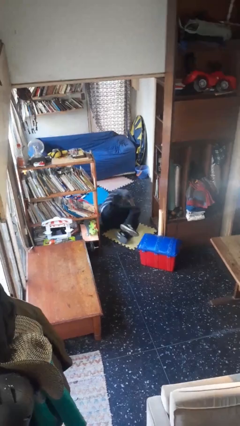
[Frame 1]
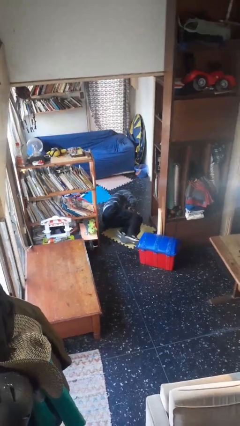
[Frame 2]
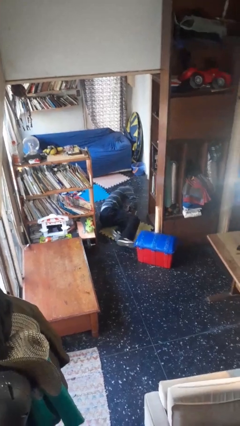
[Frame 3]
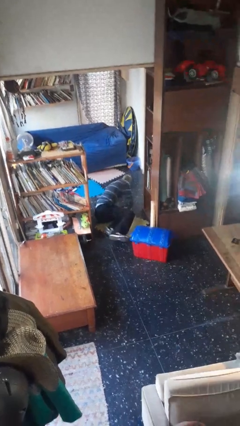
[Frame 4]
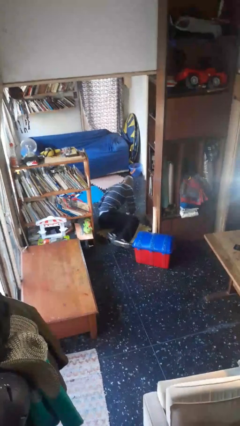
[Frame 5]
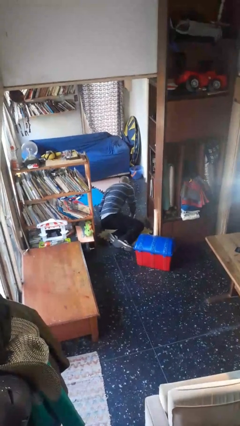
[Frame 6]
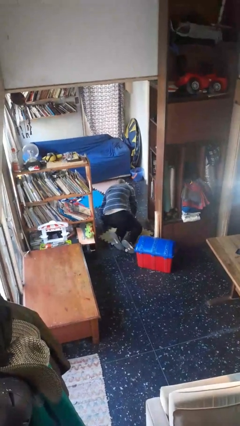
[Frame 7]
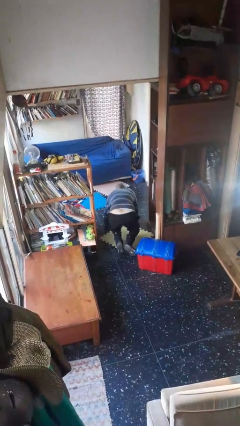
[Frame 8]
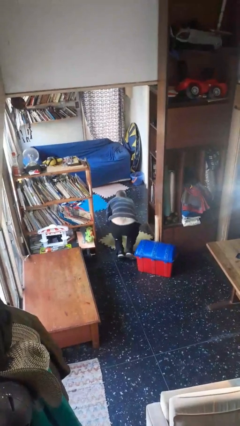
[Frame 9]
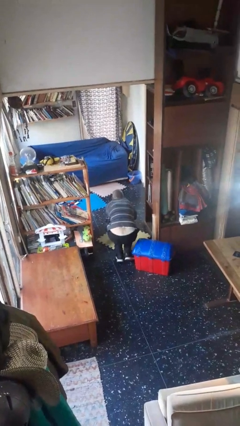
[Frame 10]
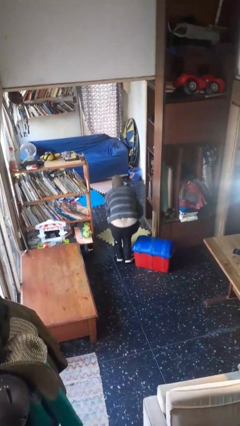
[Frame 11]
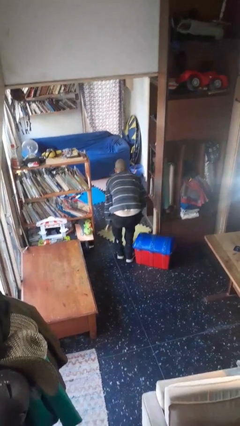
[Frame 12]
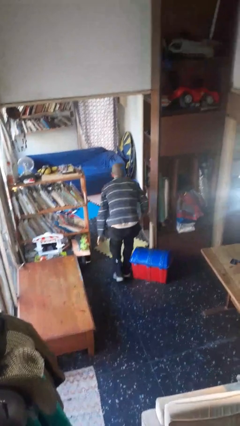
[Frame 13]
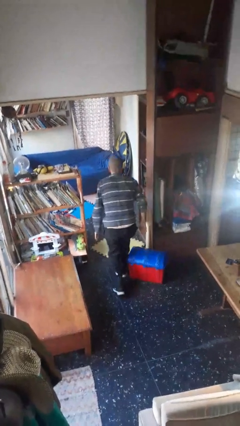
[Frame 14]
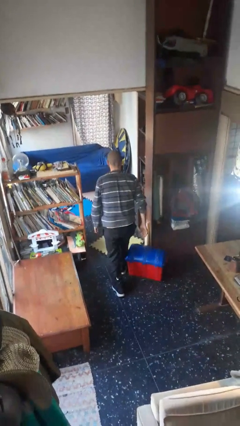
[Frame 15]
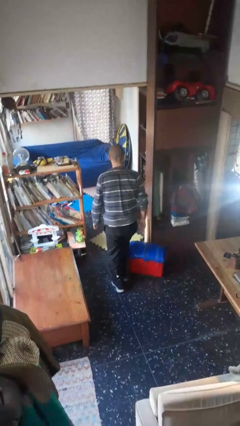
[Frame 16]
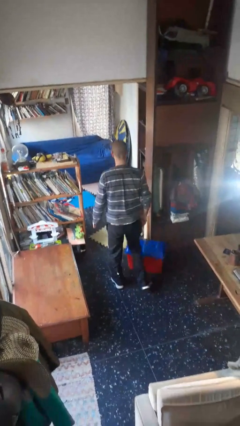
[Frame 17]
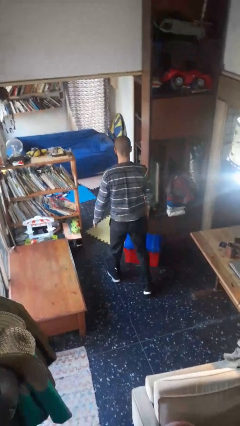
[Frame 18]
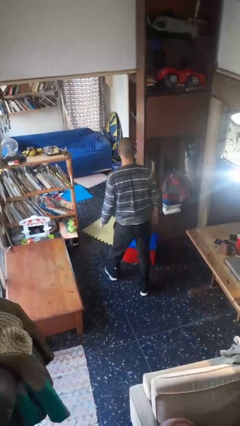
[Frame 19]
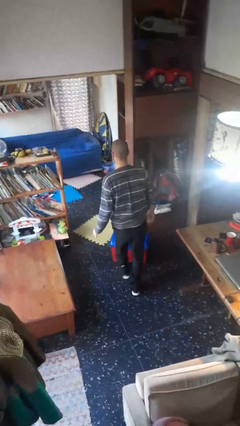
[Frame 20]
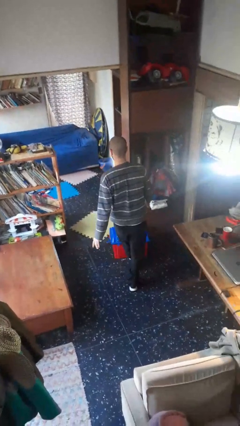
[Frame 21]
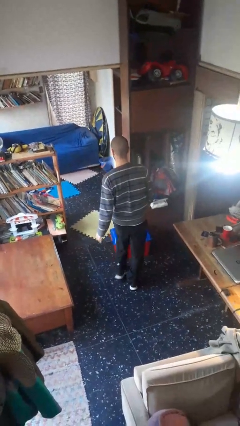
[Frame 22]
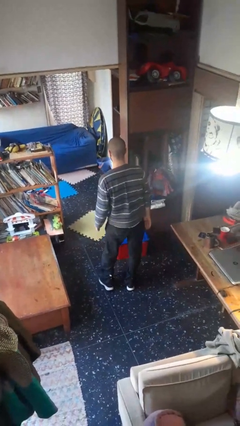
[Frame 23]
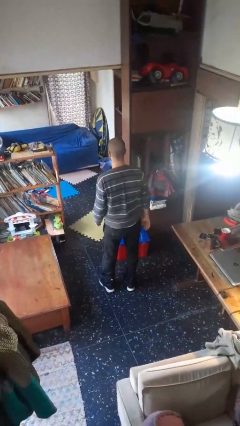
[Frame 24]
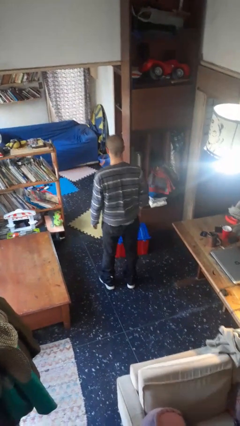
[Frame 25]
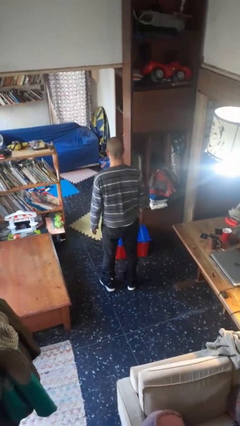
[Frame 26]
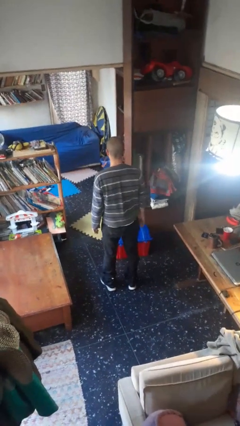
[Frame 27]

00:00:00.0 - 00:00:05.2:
person stands up from floor

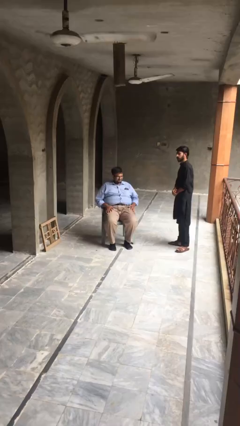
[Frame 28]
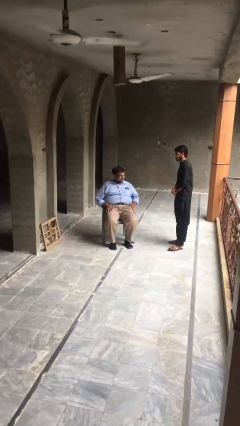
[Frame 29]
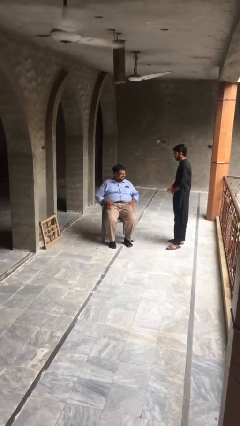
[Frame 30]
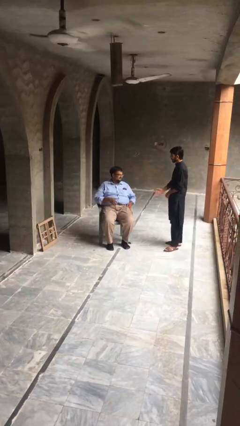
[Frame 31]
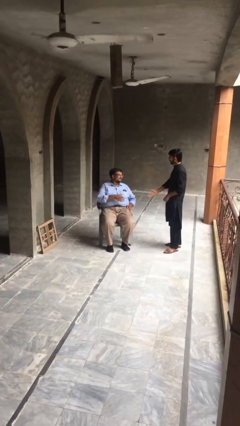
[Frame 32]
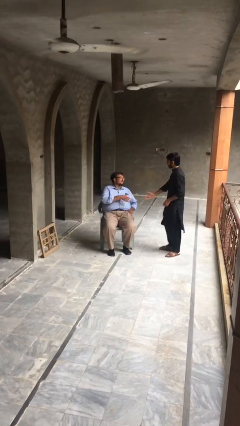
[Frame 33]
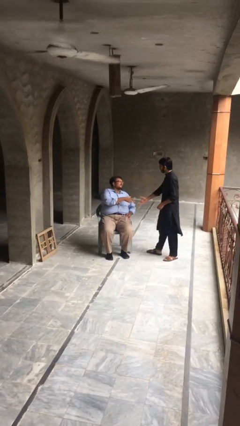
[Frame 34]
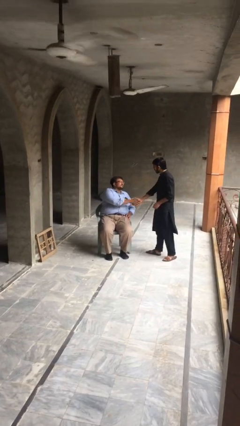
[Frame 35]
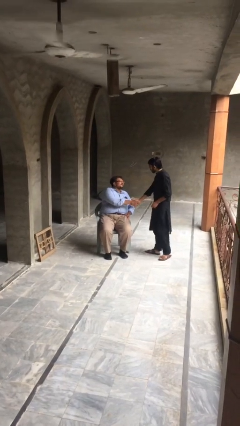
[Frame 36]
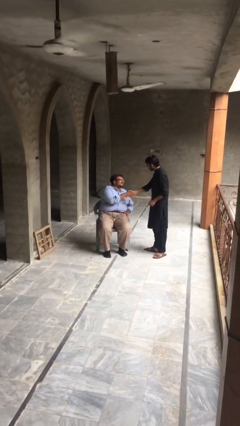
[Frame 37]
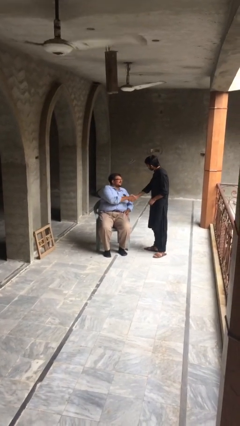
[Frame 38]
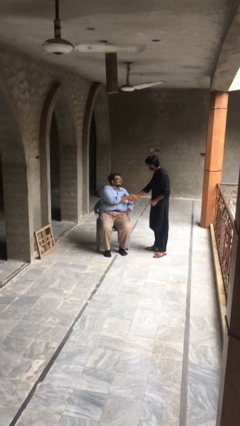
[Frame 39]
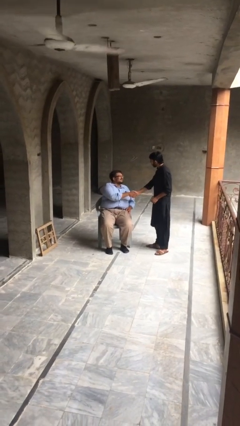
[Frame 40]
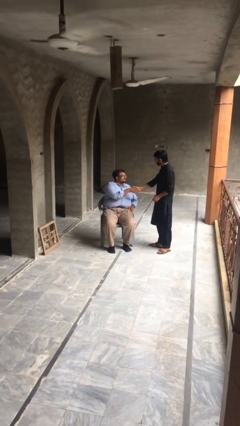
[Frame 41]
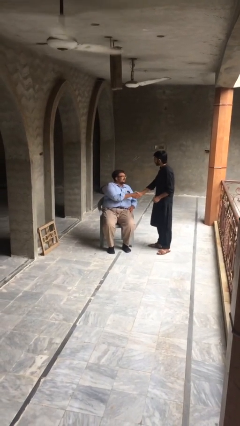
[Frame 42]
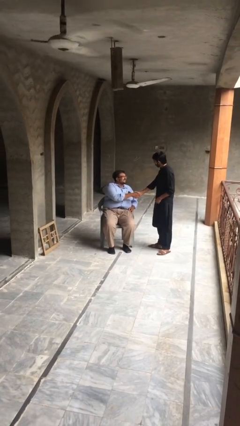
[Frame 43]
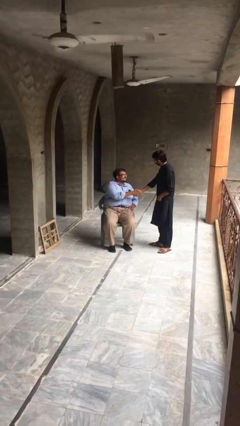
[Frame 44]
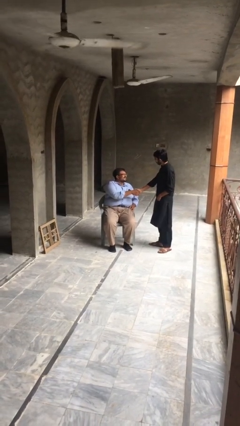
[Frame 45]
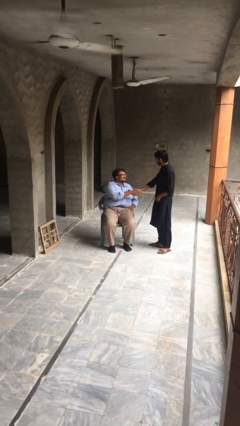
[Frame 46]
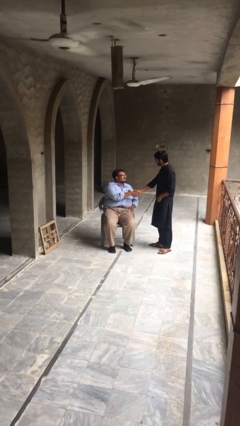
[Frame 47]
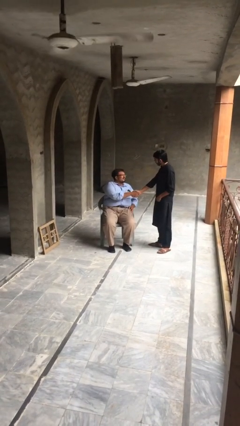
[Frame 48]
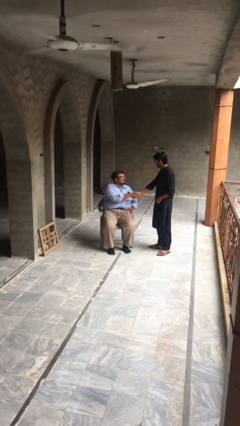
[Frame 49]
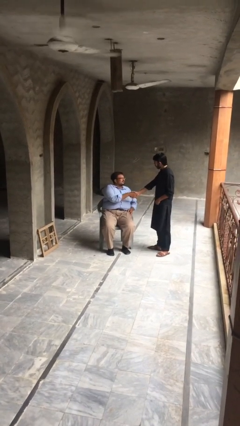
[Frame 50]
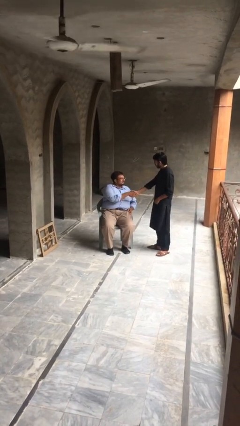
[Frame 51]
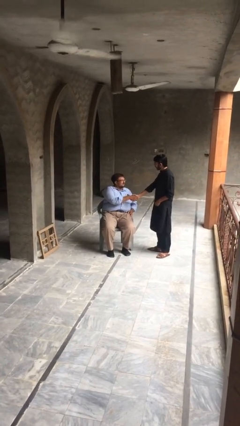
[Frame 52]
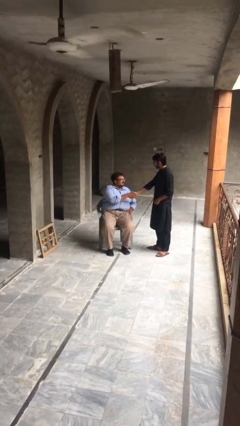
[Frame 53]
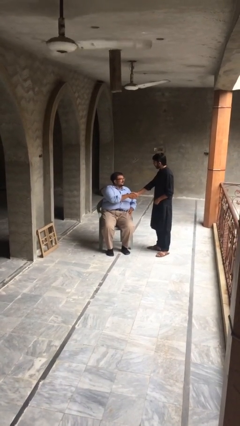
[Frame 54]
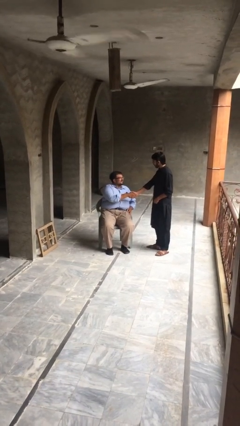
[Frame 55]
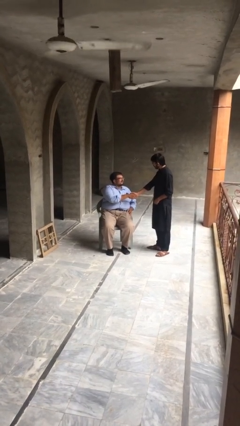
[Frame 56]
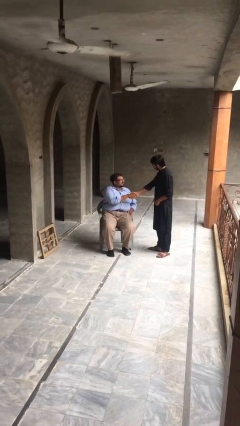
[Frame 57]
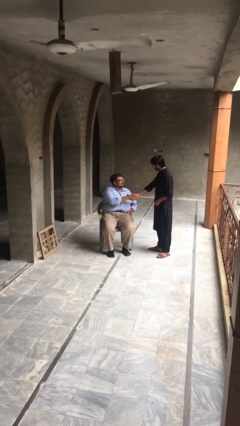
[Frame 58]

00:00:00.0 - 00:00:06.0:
person shakes hand

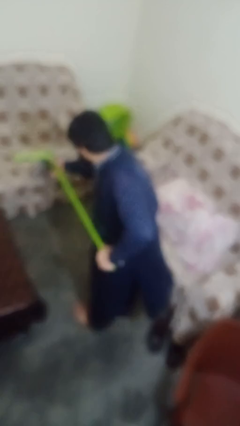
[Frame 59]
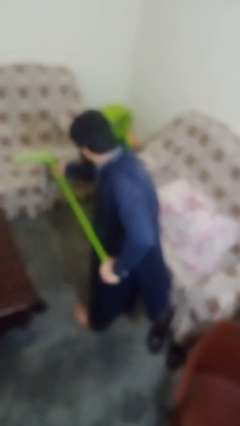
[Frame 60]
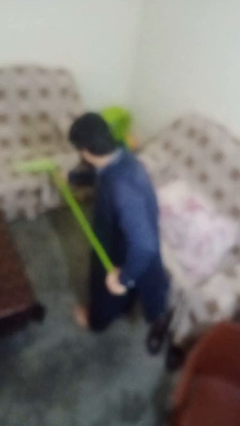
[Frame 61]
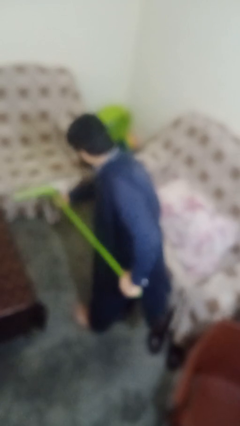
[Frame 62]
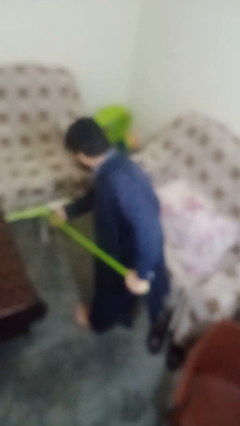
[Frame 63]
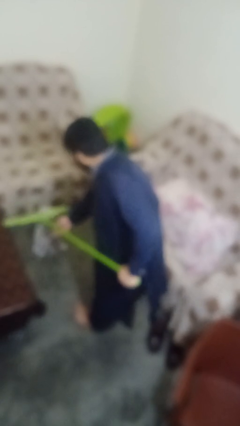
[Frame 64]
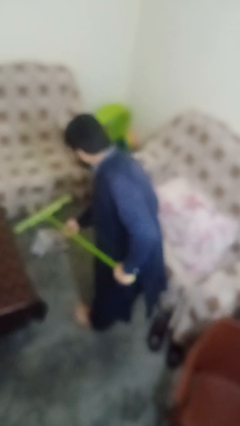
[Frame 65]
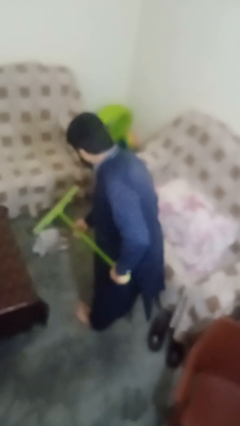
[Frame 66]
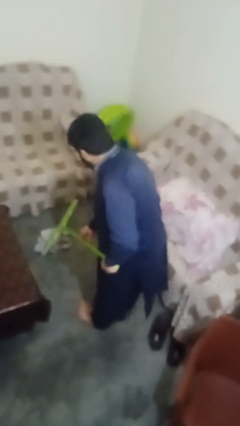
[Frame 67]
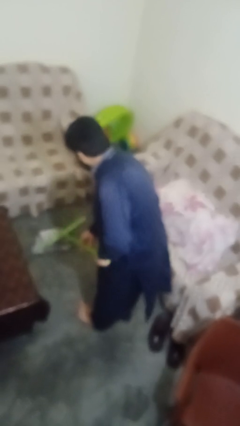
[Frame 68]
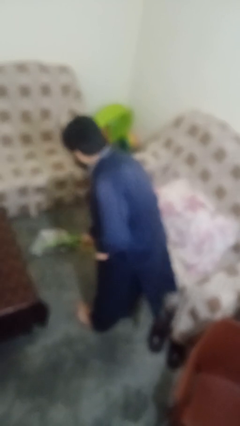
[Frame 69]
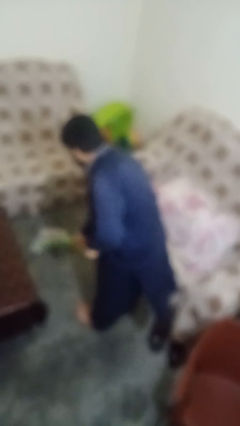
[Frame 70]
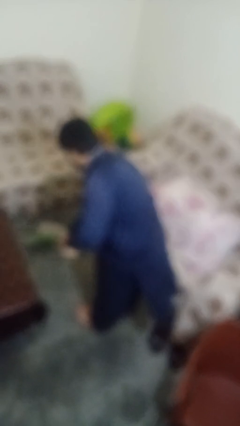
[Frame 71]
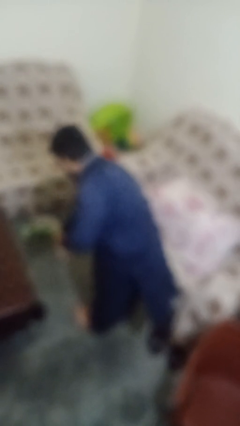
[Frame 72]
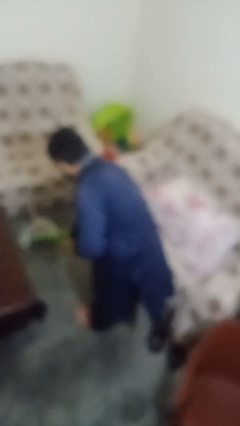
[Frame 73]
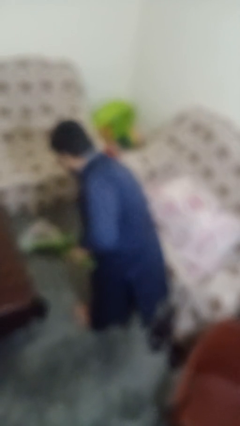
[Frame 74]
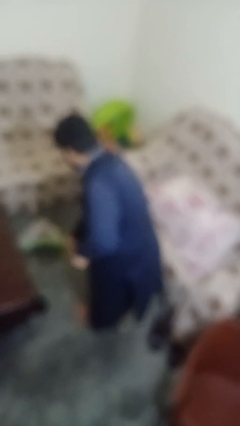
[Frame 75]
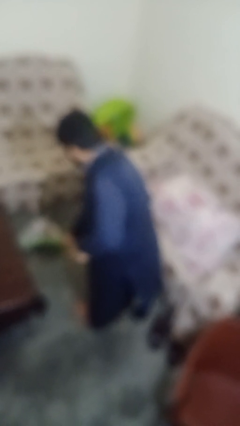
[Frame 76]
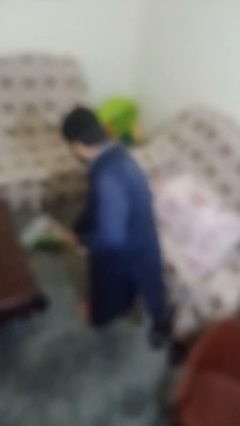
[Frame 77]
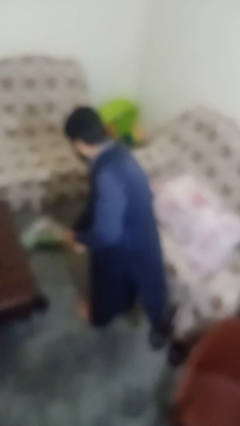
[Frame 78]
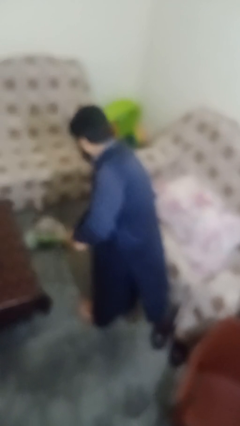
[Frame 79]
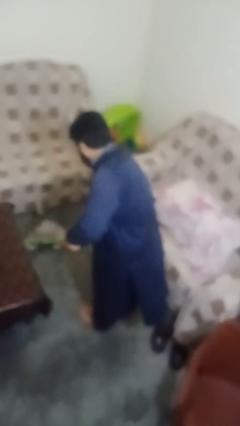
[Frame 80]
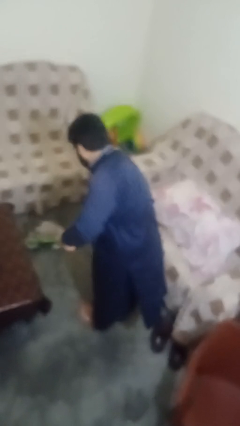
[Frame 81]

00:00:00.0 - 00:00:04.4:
person mops

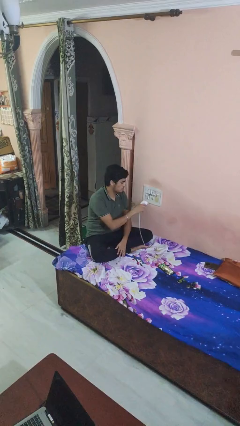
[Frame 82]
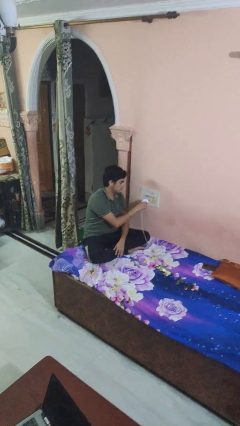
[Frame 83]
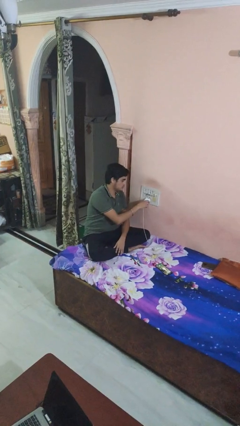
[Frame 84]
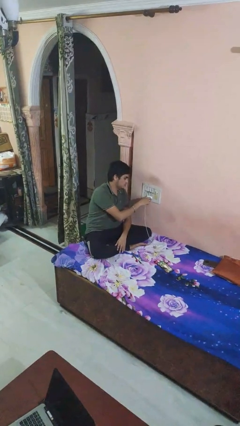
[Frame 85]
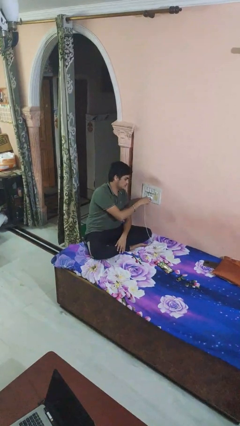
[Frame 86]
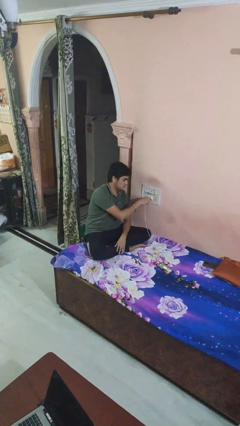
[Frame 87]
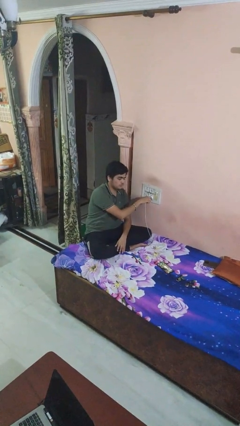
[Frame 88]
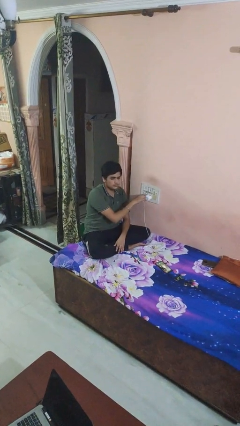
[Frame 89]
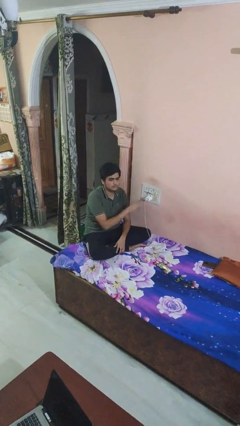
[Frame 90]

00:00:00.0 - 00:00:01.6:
person plugs into electrical socket

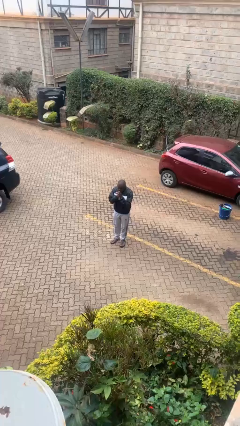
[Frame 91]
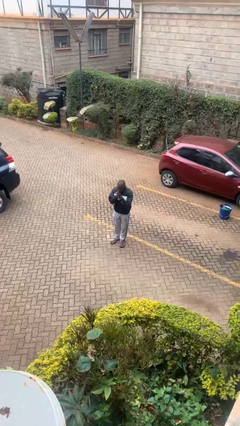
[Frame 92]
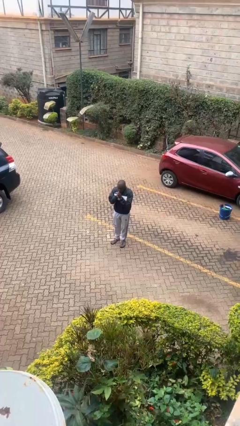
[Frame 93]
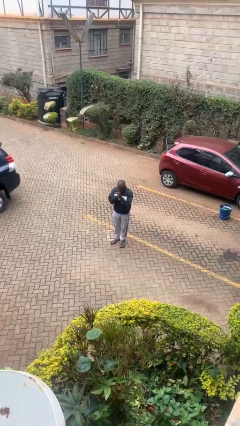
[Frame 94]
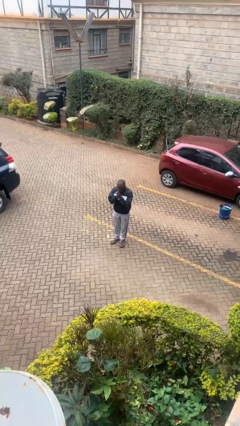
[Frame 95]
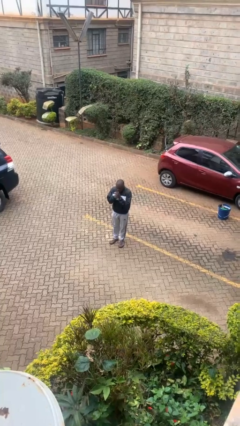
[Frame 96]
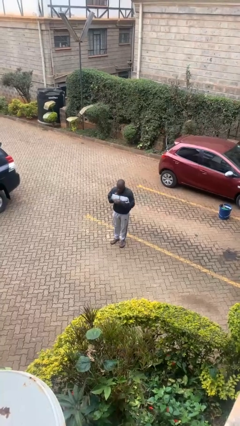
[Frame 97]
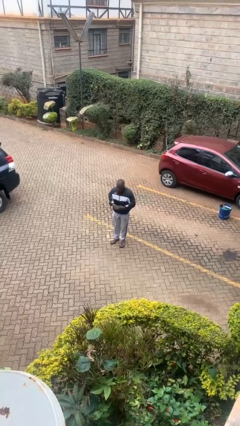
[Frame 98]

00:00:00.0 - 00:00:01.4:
person blows into hands
